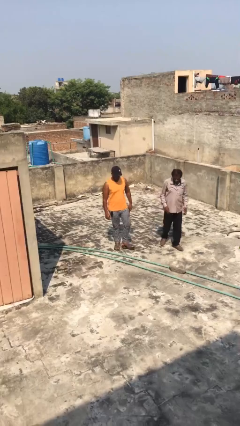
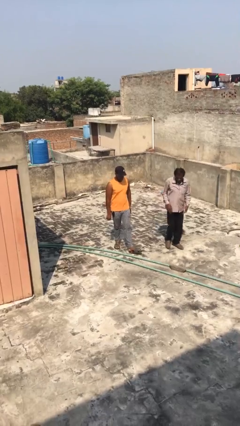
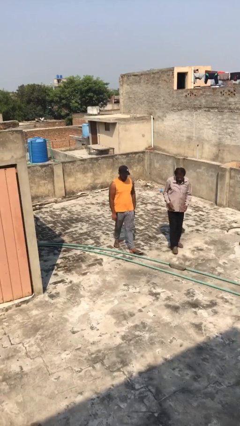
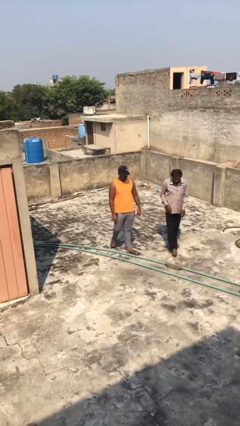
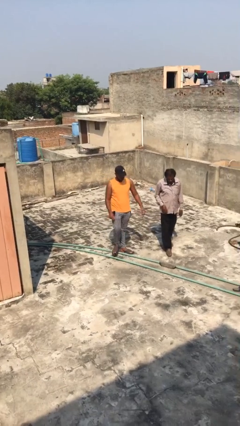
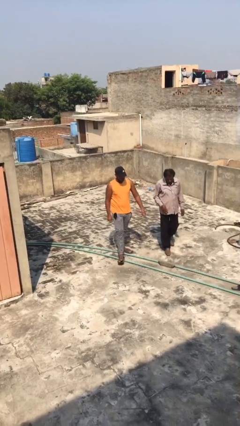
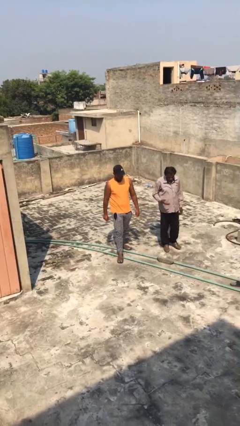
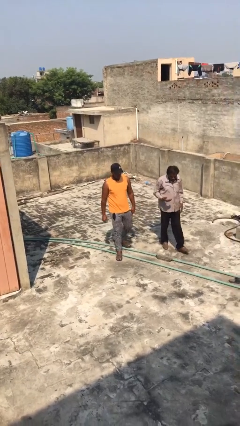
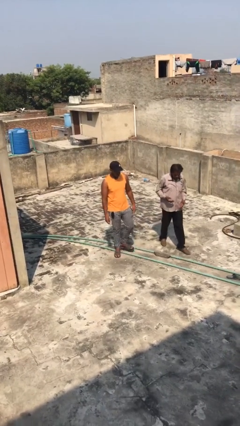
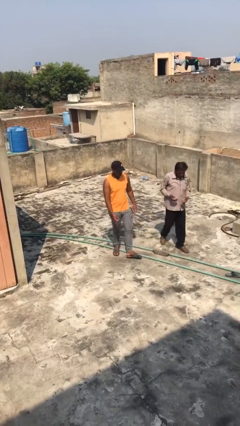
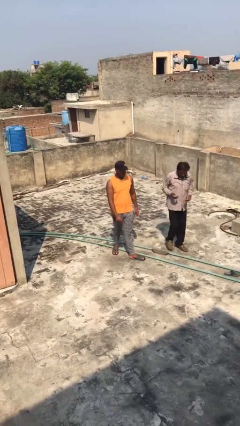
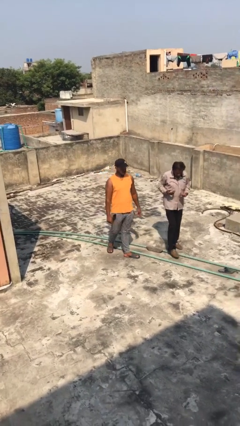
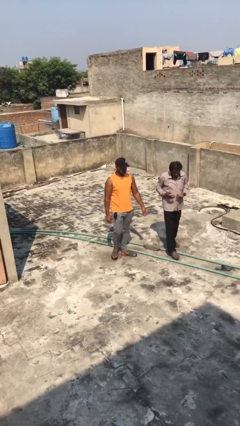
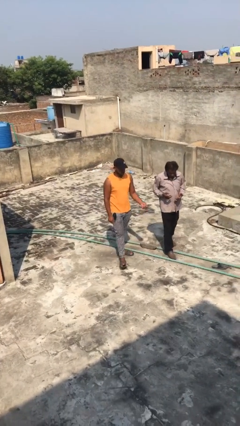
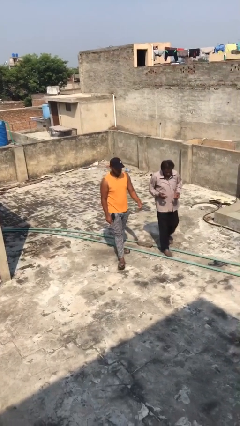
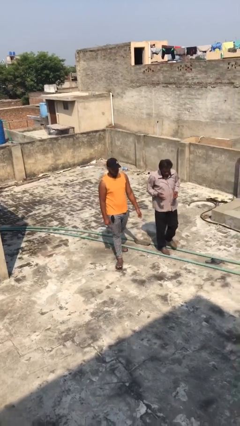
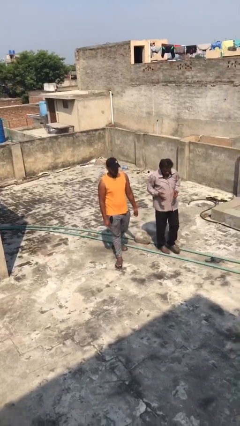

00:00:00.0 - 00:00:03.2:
person talks to person

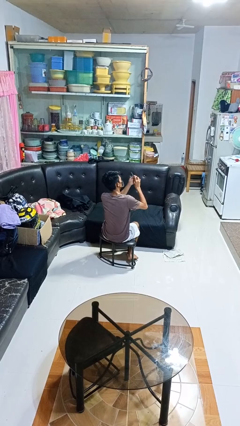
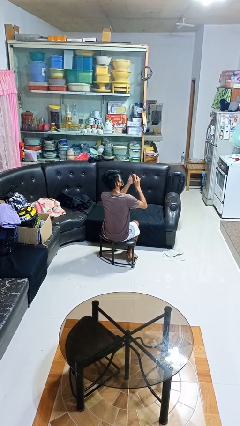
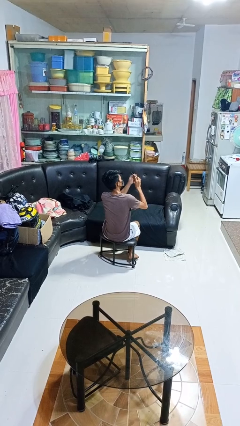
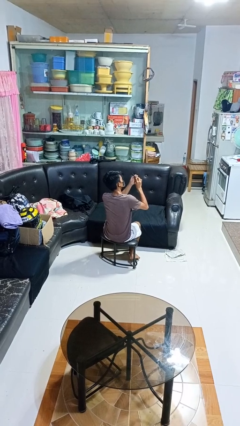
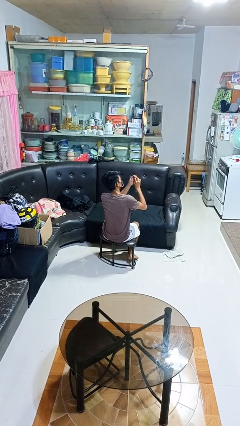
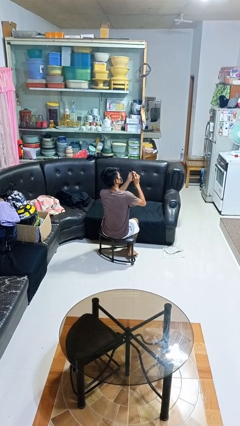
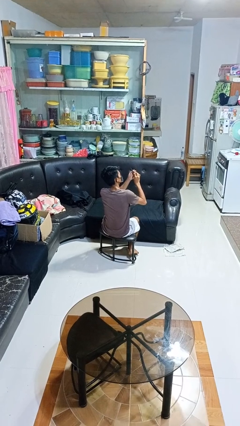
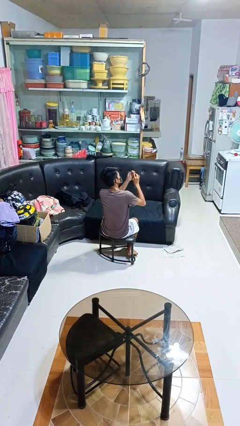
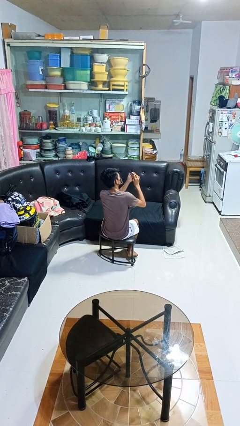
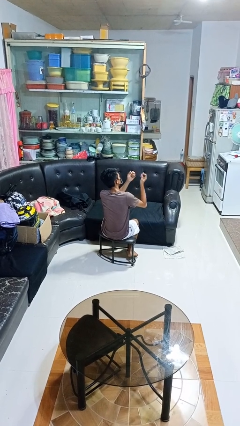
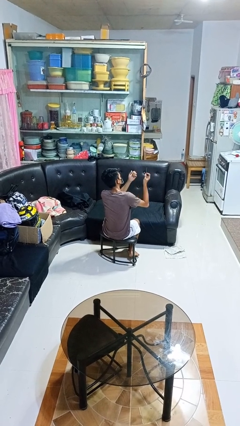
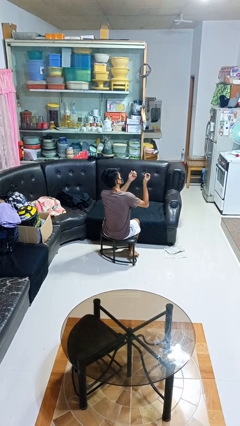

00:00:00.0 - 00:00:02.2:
person files fingernails

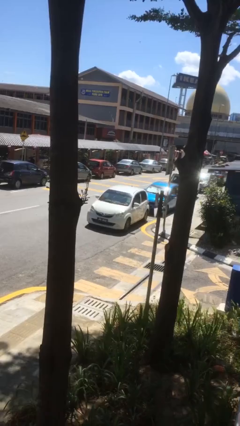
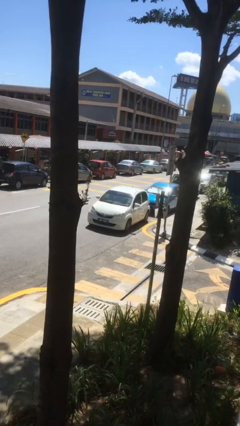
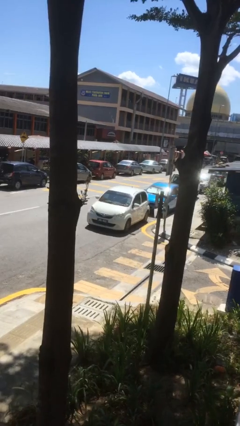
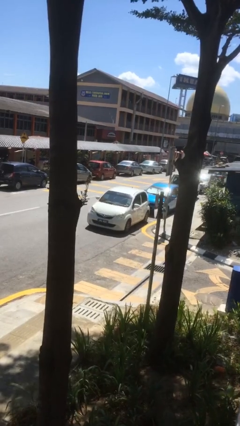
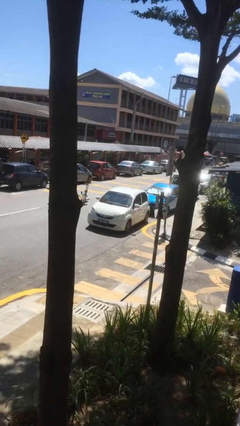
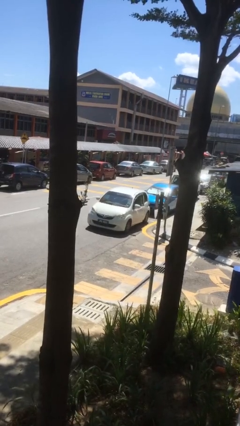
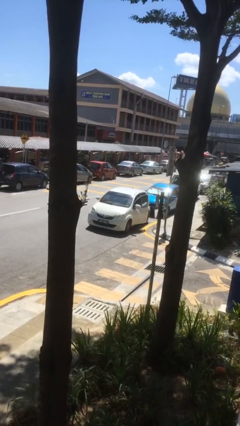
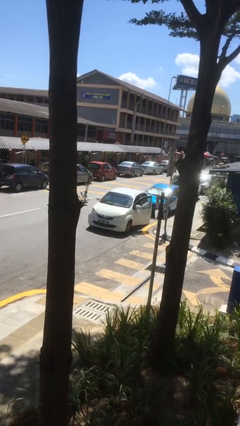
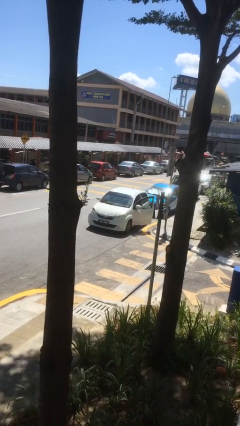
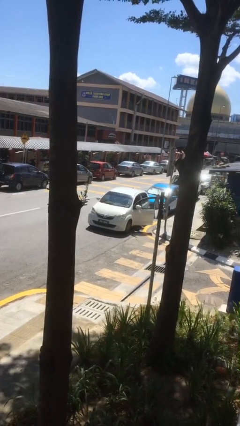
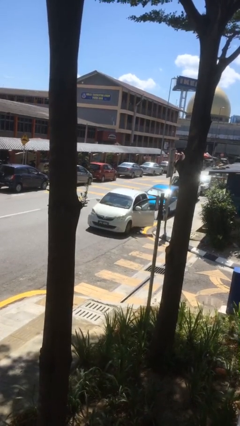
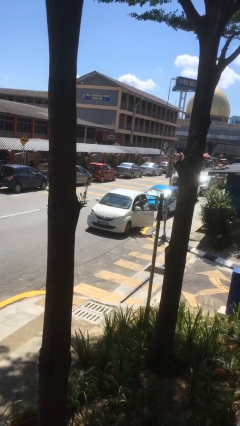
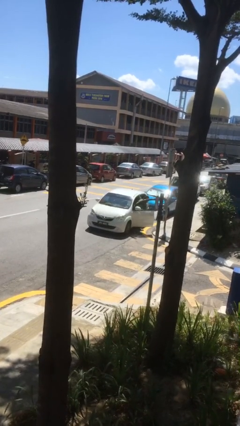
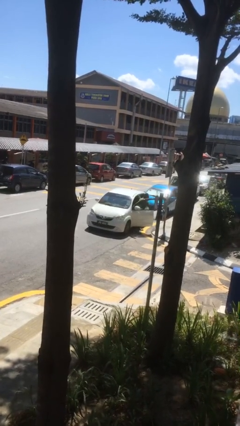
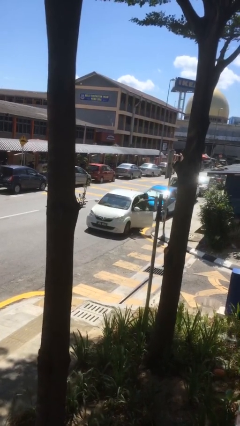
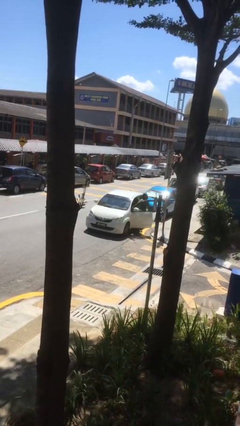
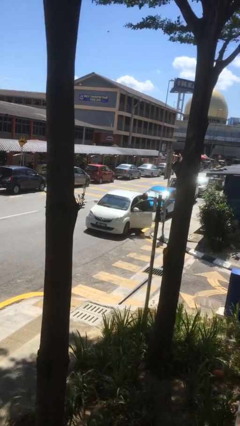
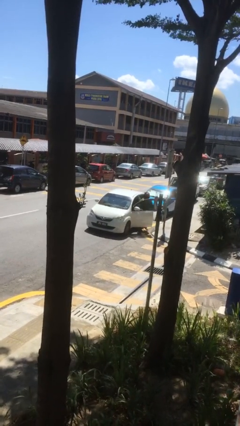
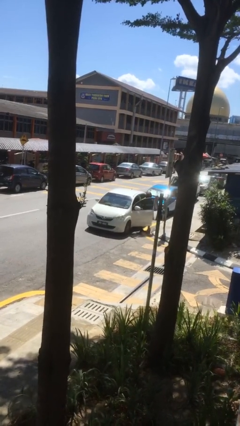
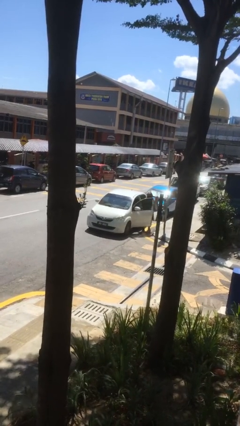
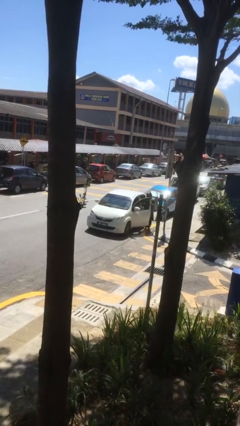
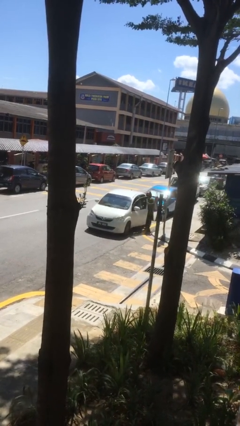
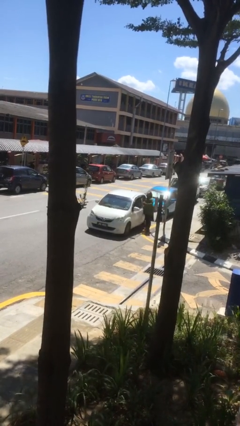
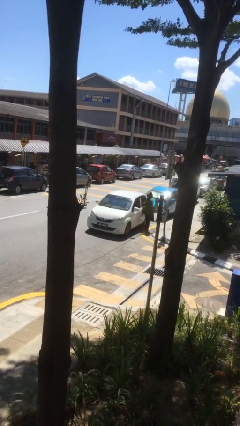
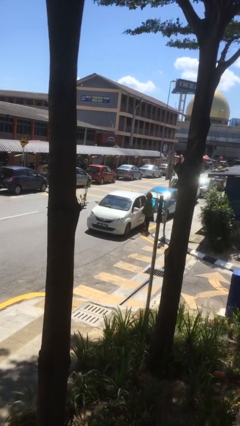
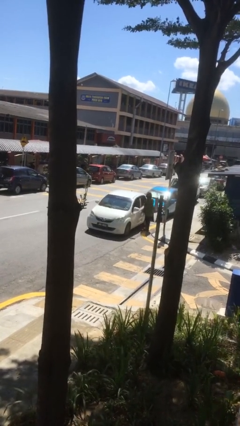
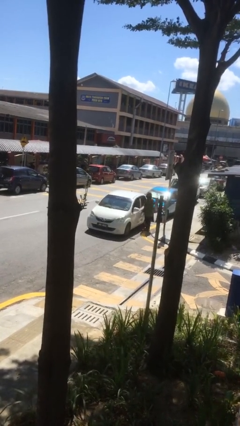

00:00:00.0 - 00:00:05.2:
car drops off person

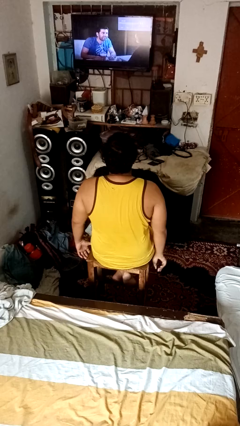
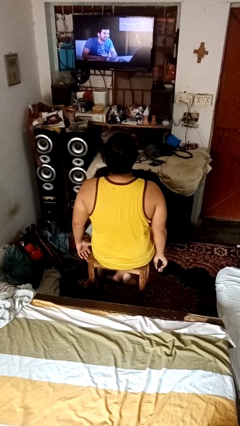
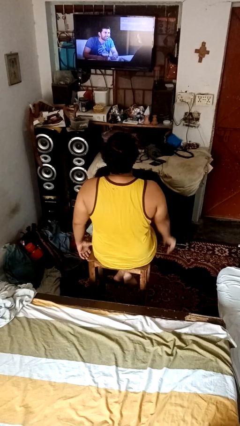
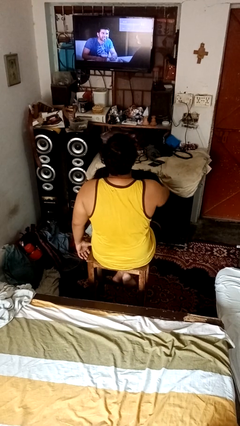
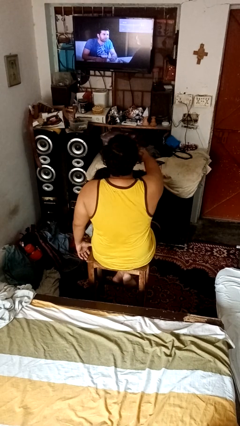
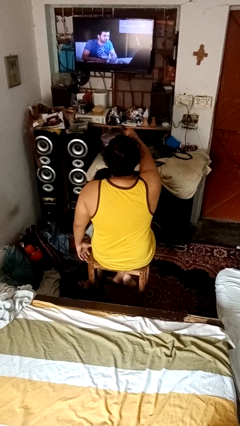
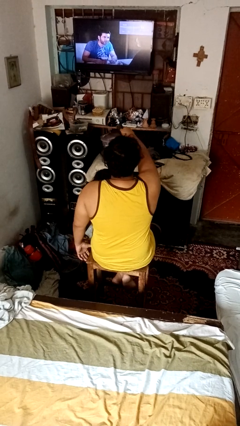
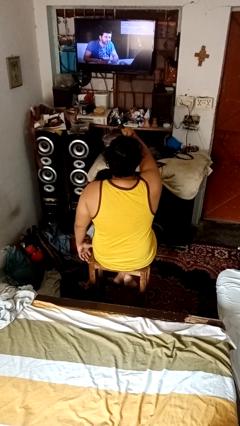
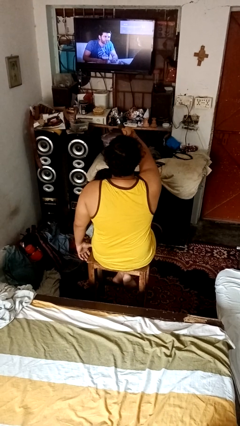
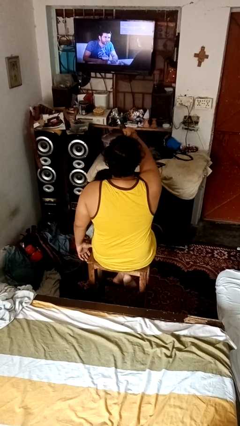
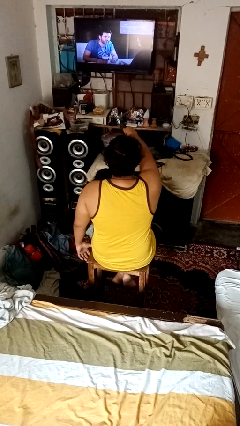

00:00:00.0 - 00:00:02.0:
person uses television remote

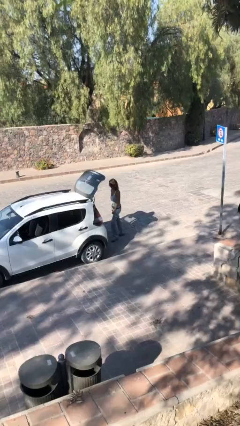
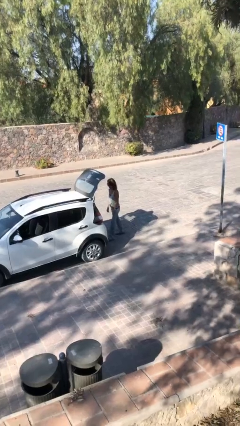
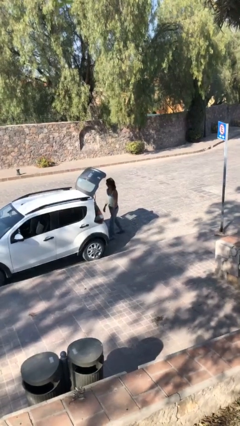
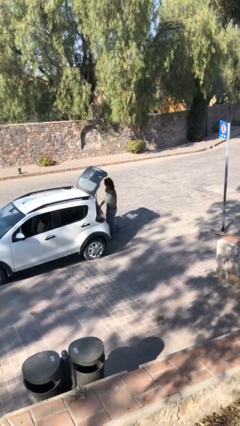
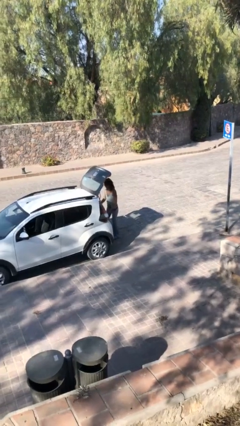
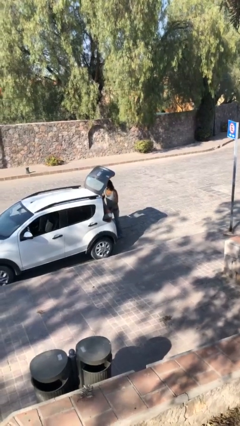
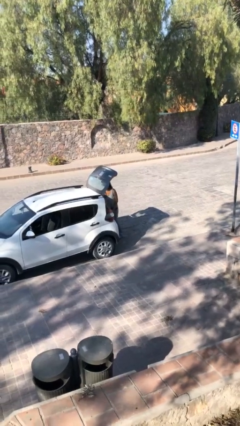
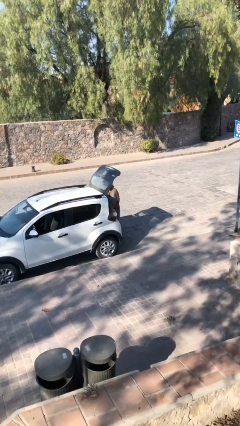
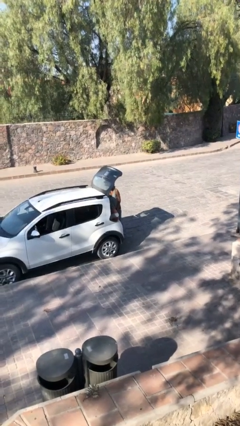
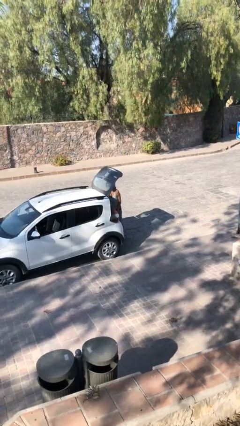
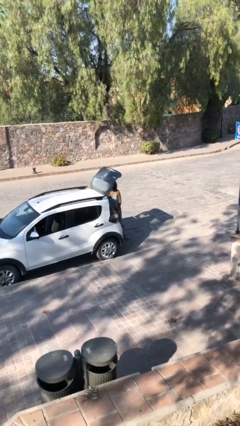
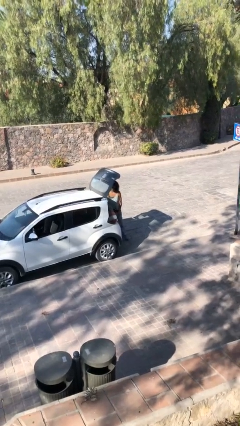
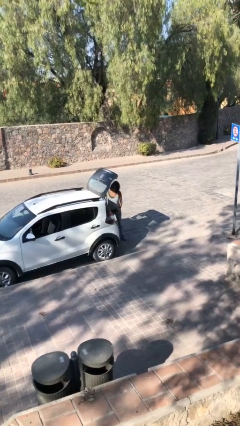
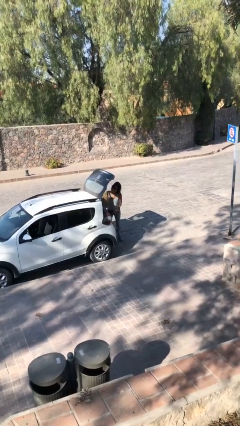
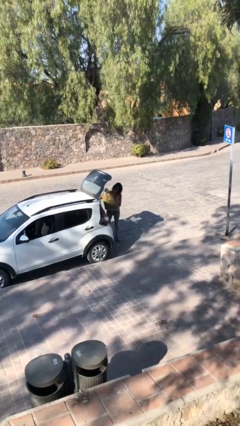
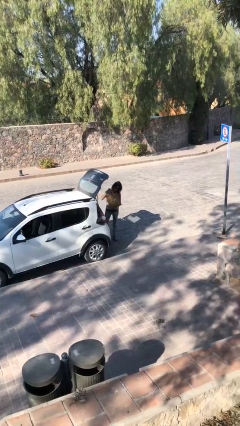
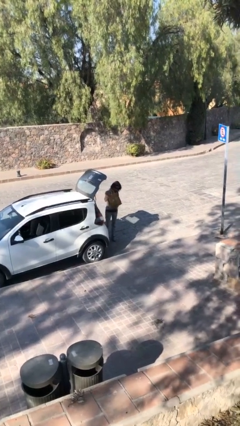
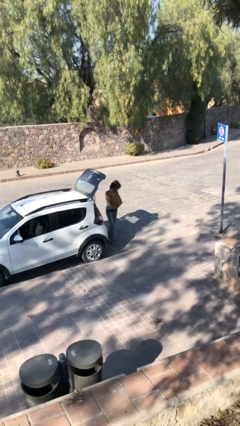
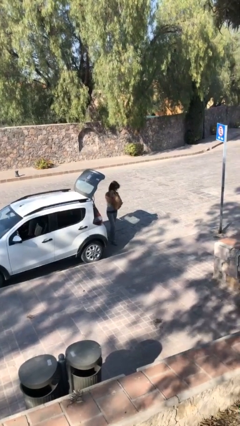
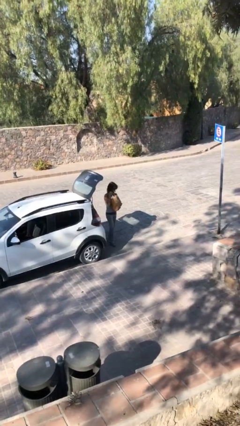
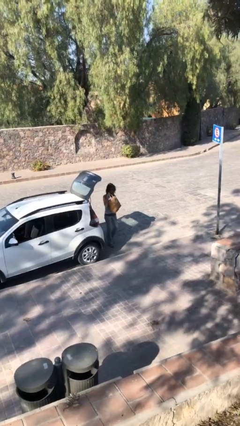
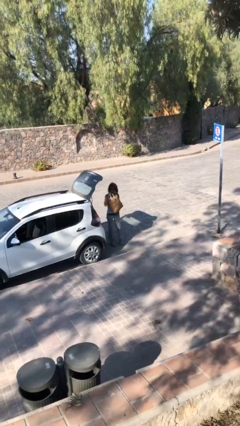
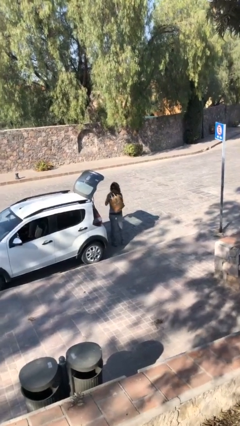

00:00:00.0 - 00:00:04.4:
person unloads car

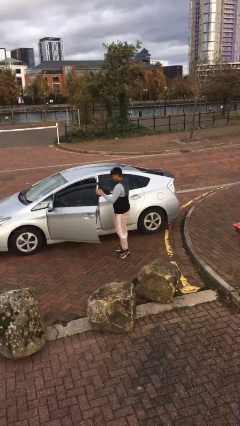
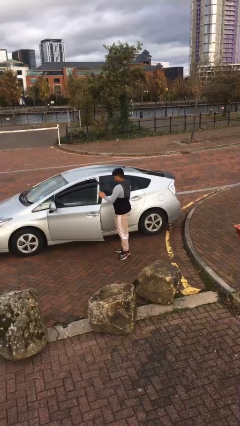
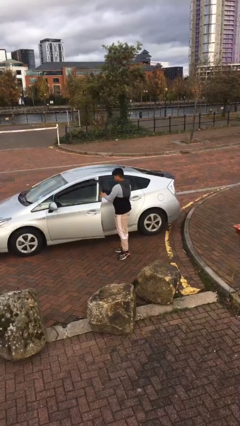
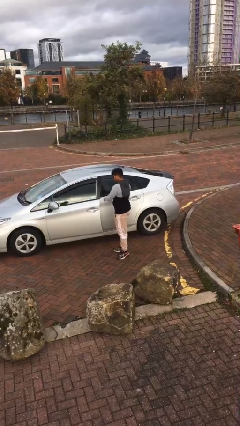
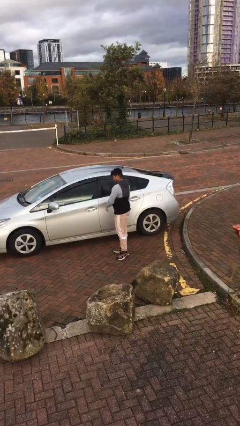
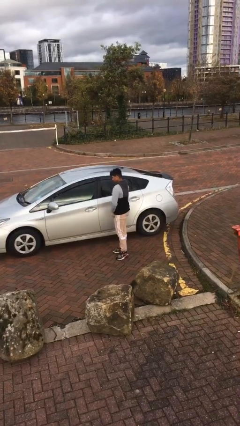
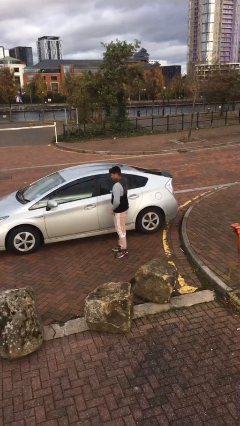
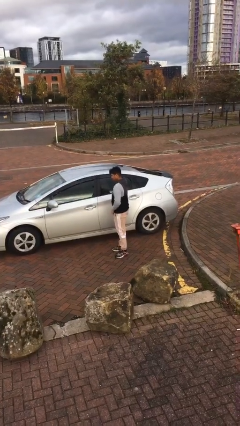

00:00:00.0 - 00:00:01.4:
person closes car door
